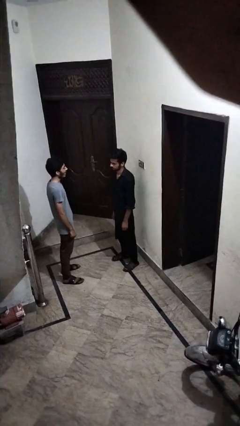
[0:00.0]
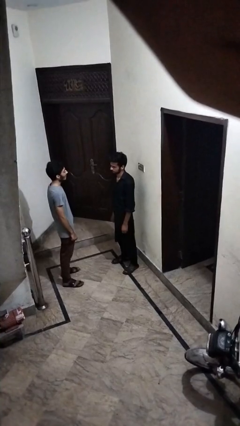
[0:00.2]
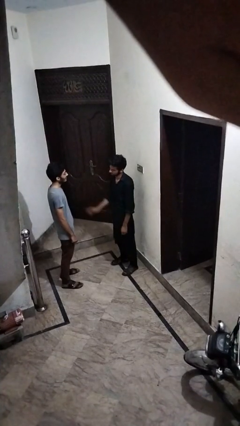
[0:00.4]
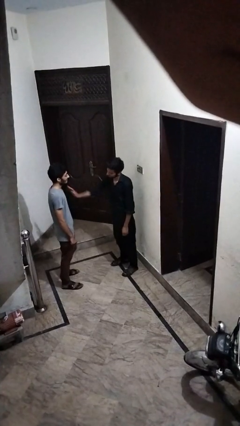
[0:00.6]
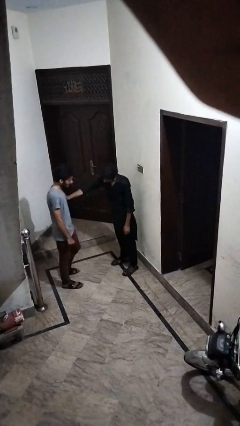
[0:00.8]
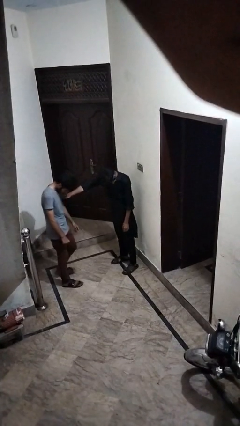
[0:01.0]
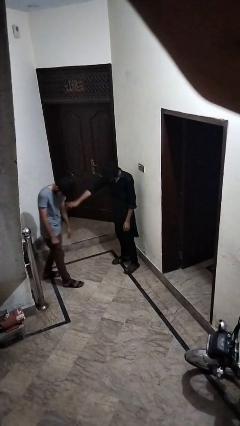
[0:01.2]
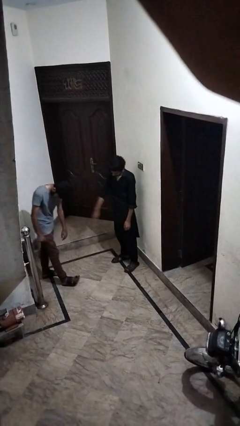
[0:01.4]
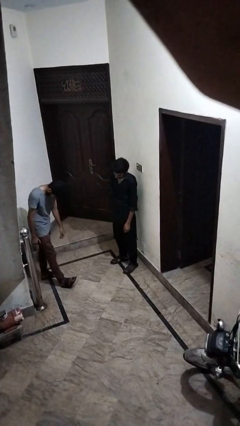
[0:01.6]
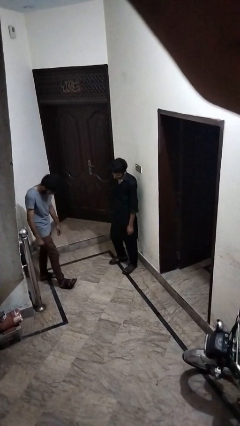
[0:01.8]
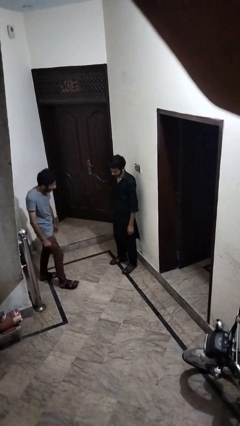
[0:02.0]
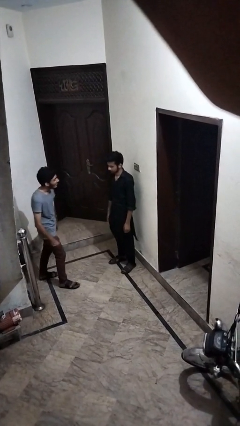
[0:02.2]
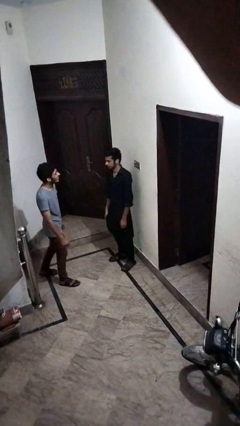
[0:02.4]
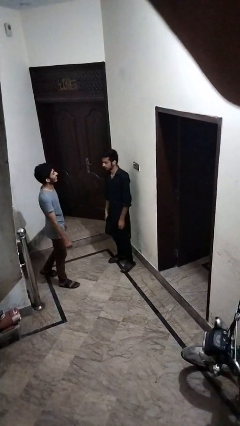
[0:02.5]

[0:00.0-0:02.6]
person shoves person

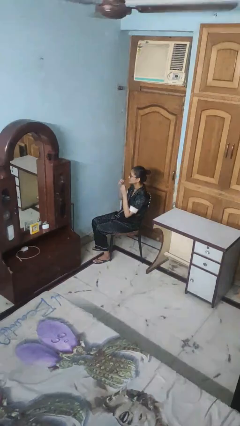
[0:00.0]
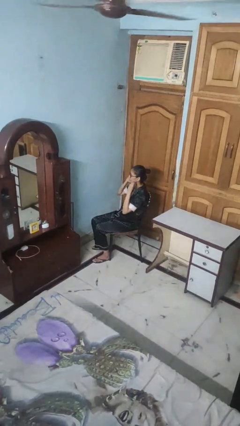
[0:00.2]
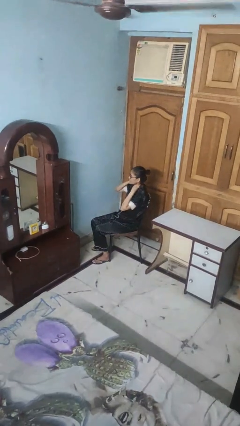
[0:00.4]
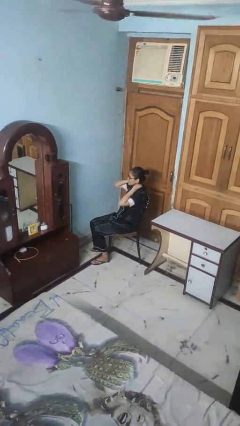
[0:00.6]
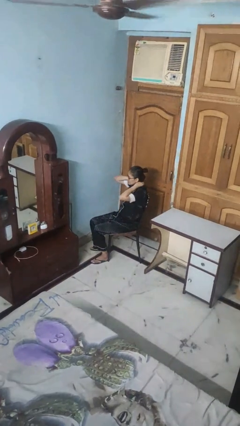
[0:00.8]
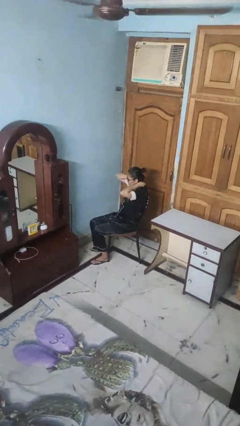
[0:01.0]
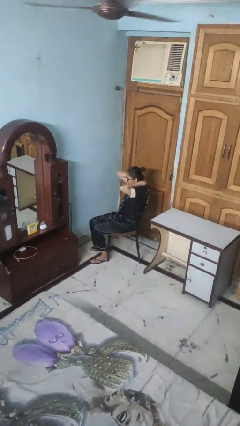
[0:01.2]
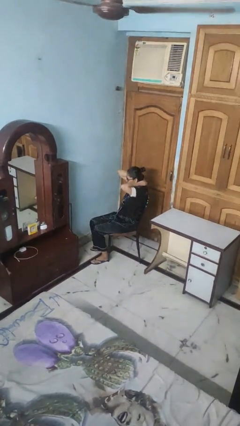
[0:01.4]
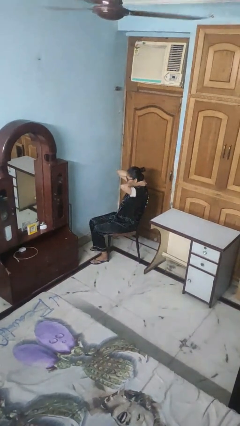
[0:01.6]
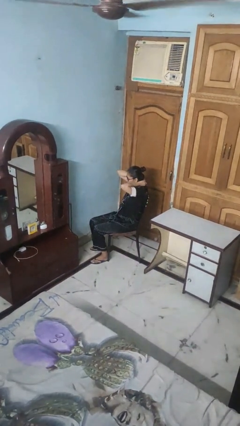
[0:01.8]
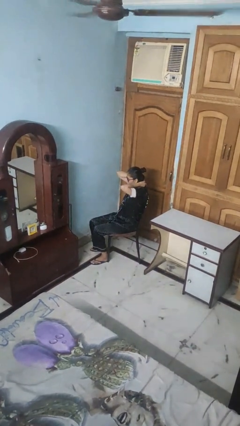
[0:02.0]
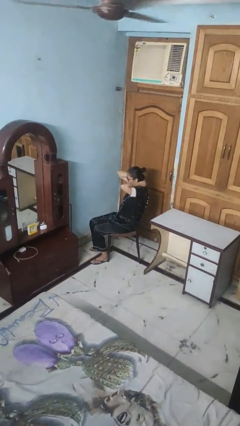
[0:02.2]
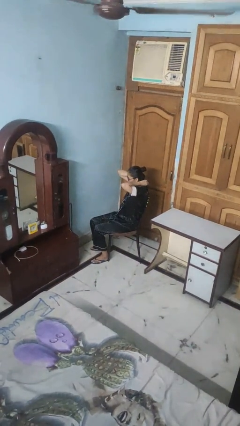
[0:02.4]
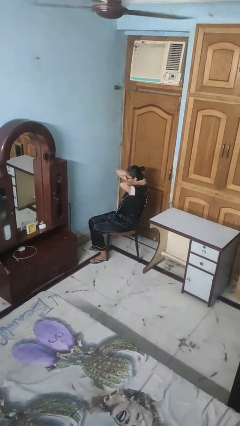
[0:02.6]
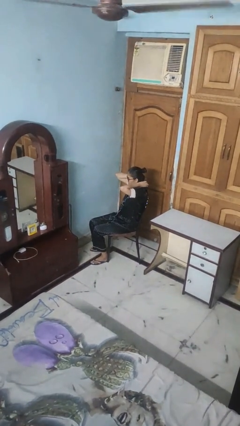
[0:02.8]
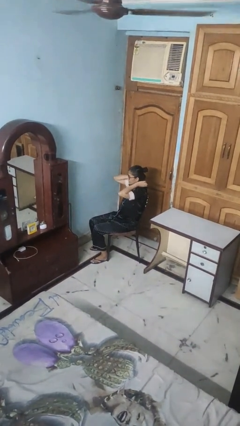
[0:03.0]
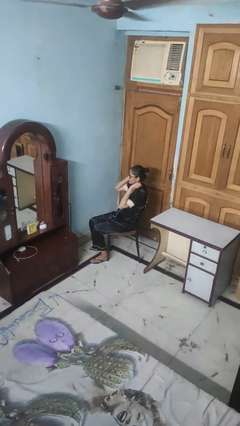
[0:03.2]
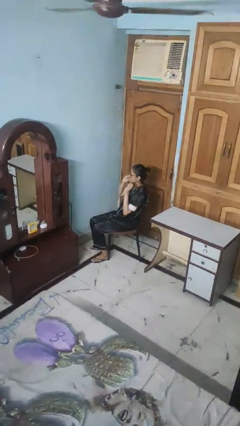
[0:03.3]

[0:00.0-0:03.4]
person puts on necklace

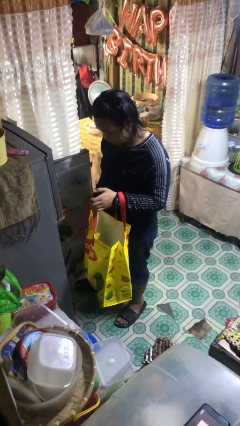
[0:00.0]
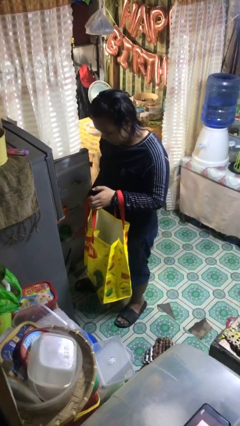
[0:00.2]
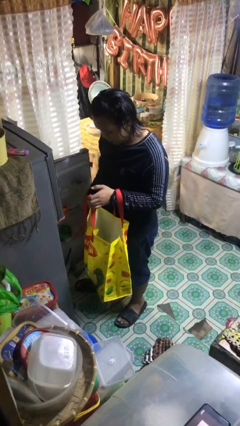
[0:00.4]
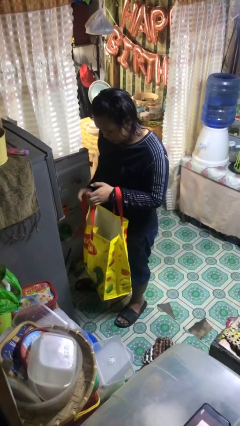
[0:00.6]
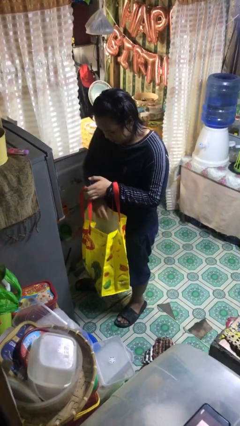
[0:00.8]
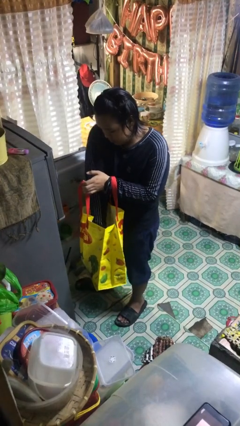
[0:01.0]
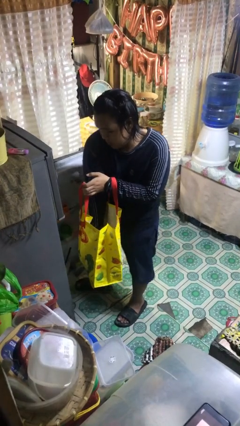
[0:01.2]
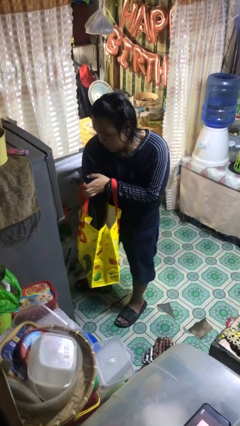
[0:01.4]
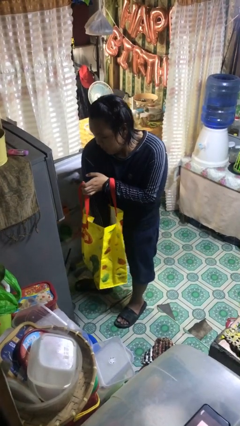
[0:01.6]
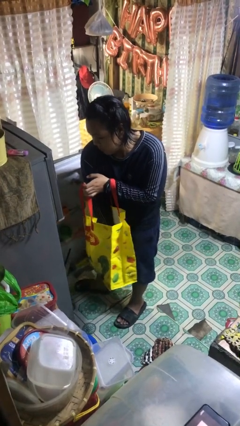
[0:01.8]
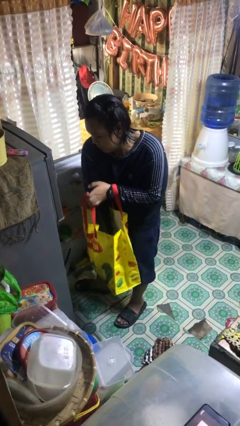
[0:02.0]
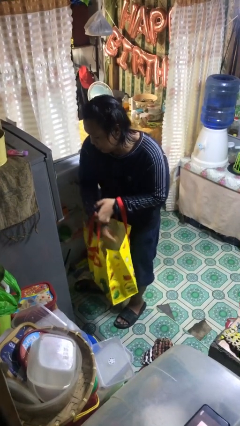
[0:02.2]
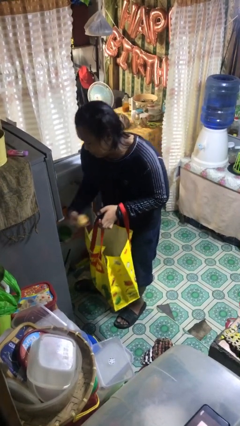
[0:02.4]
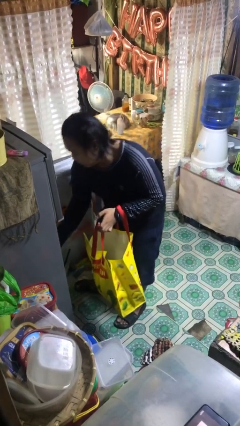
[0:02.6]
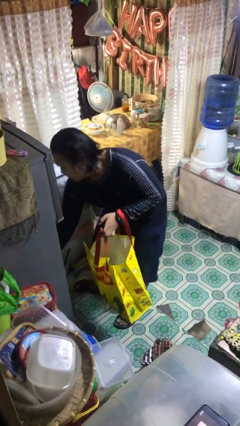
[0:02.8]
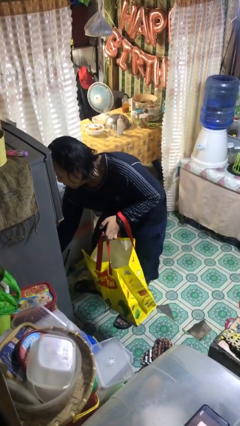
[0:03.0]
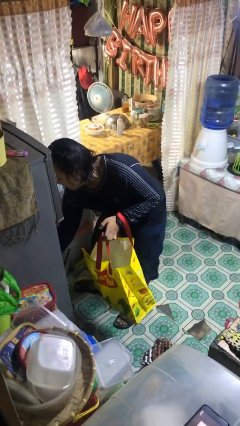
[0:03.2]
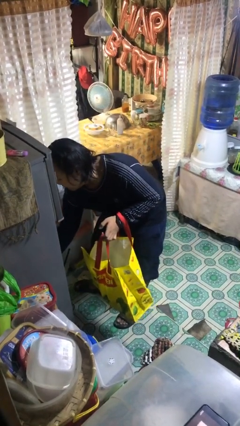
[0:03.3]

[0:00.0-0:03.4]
person loads groceries into refrigerator

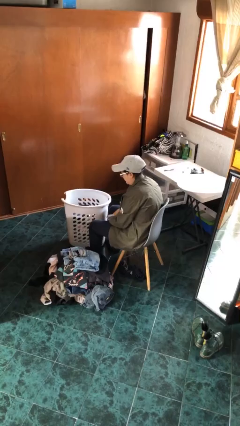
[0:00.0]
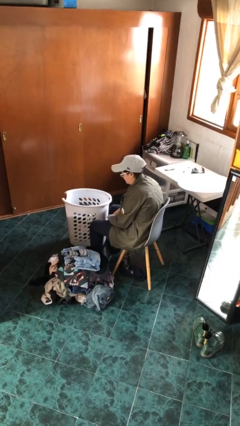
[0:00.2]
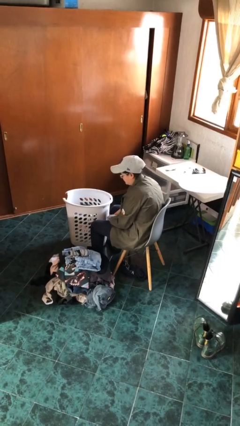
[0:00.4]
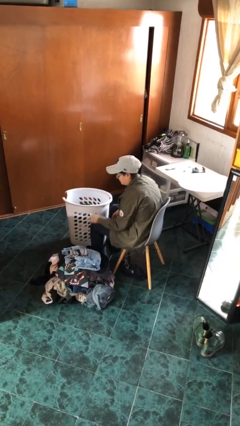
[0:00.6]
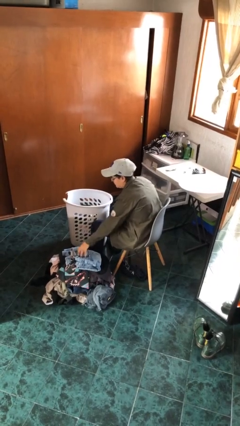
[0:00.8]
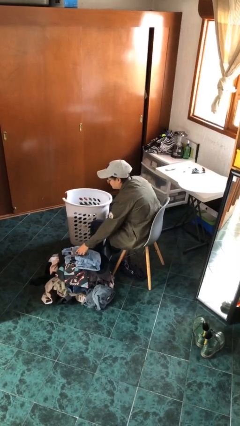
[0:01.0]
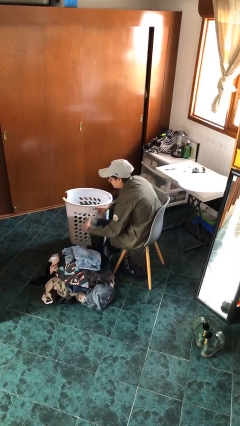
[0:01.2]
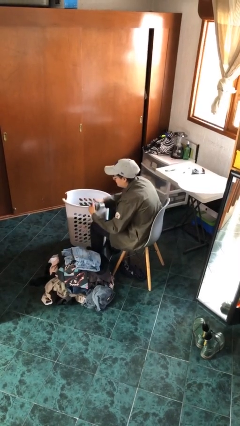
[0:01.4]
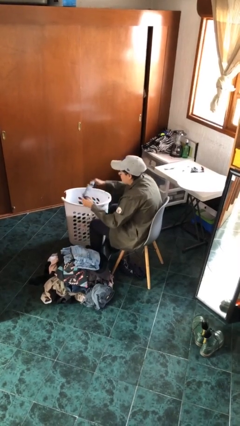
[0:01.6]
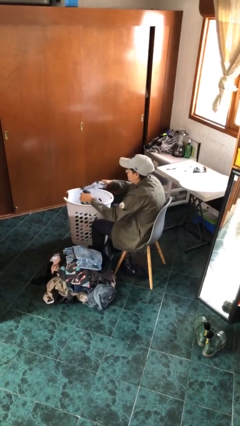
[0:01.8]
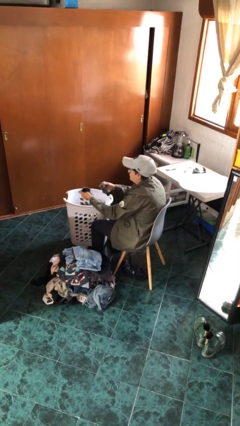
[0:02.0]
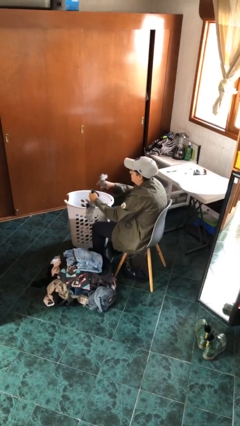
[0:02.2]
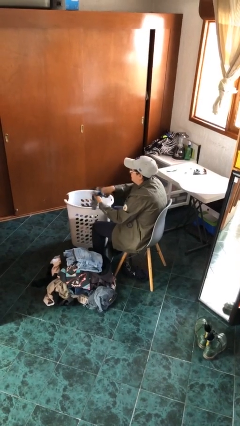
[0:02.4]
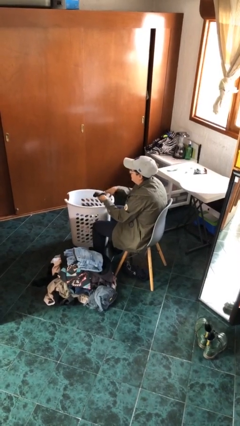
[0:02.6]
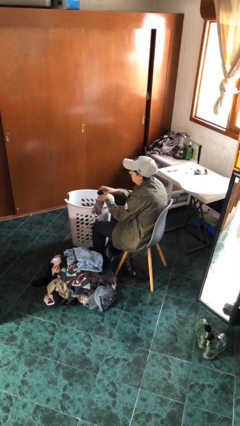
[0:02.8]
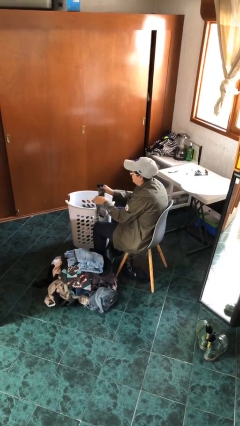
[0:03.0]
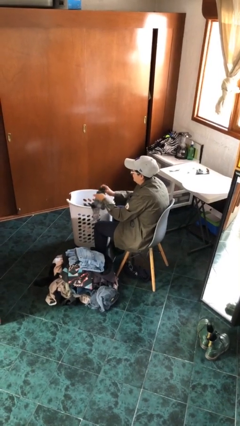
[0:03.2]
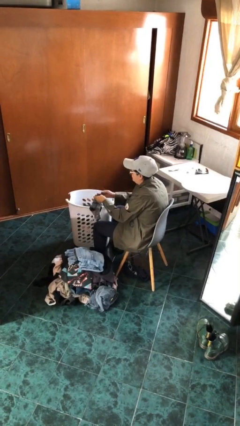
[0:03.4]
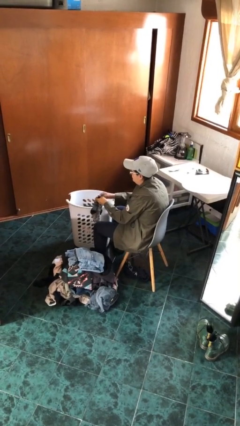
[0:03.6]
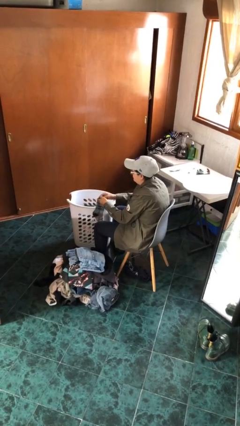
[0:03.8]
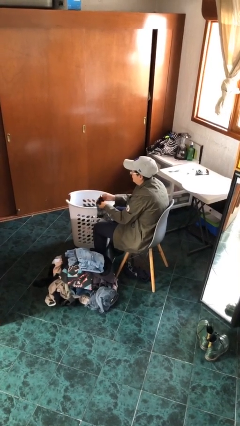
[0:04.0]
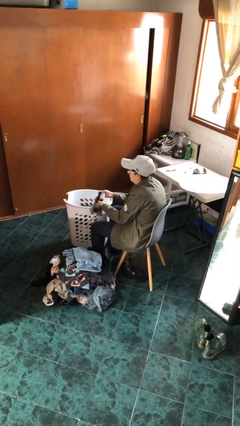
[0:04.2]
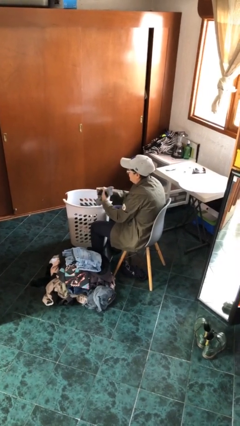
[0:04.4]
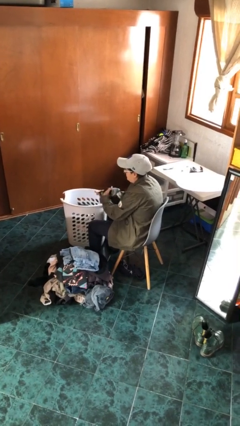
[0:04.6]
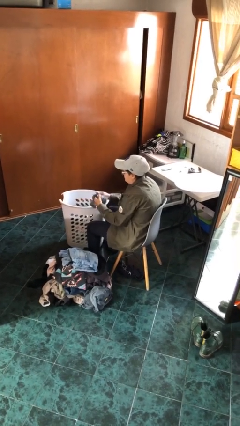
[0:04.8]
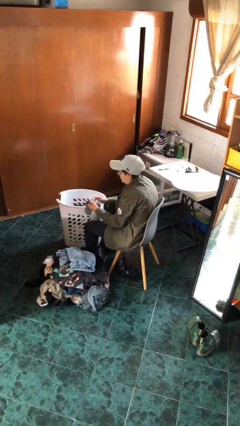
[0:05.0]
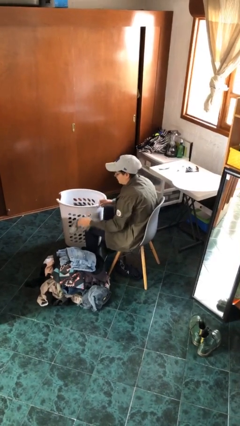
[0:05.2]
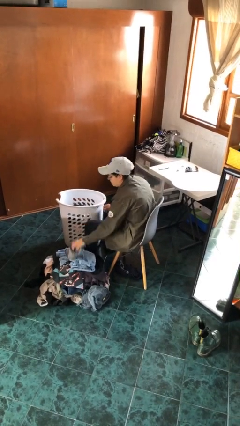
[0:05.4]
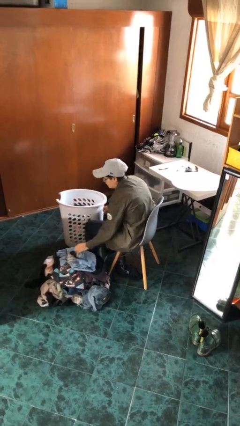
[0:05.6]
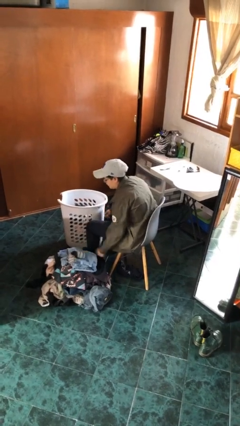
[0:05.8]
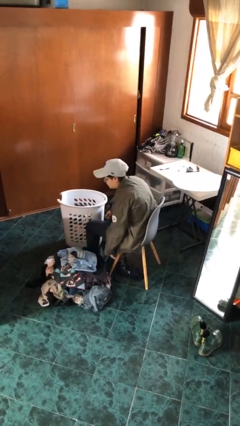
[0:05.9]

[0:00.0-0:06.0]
person folds socks

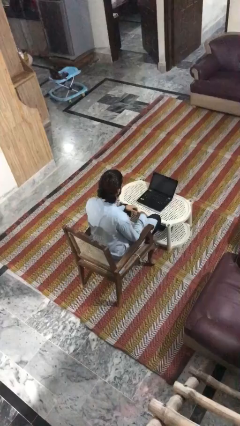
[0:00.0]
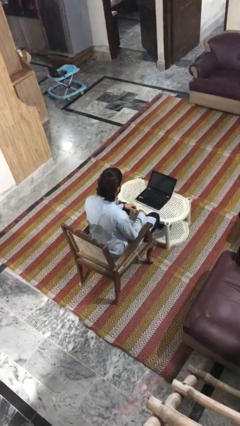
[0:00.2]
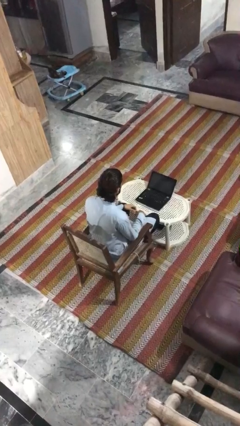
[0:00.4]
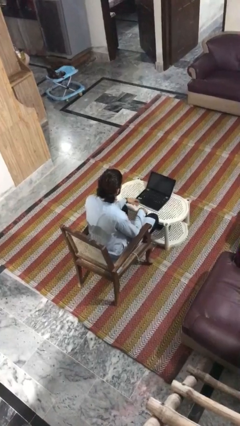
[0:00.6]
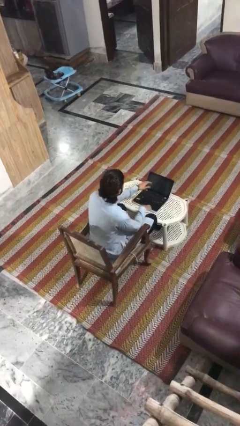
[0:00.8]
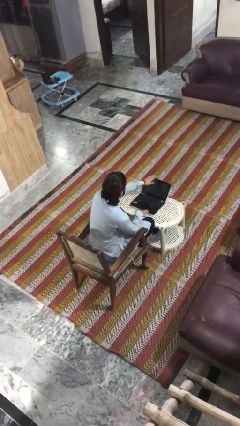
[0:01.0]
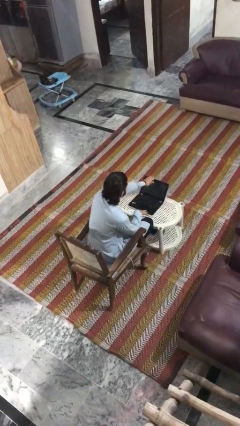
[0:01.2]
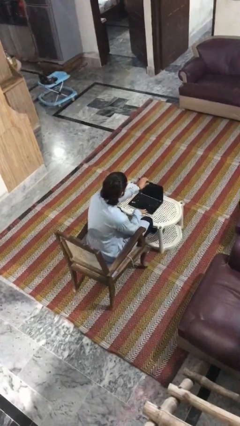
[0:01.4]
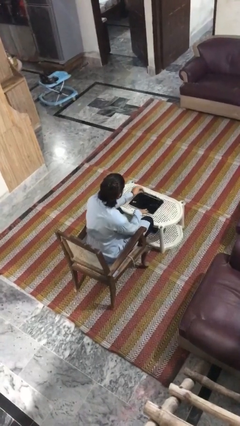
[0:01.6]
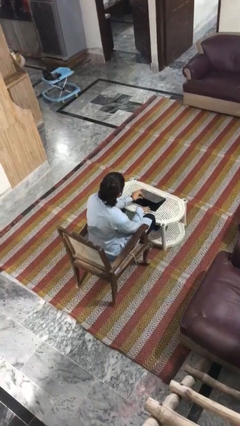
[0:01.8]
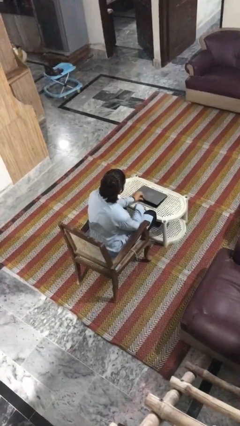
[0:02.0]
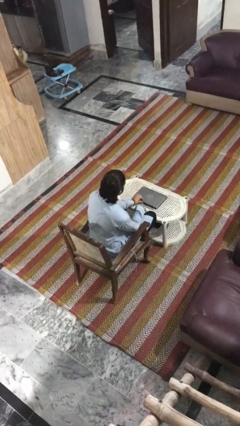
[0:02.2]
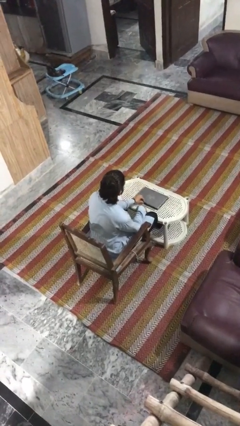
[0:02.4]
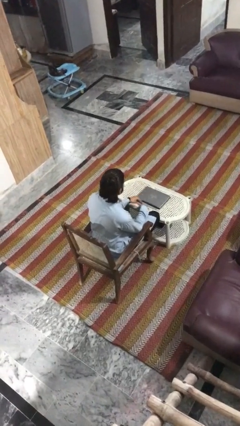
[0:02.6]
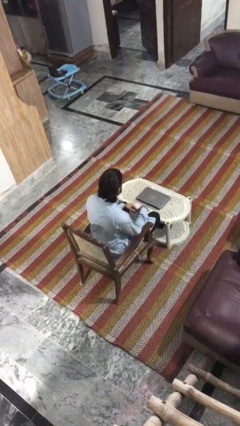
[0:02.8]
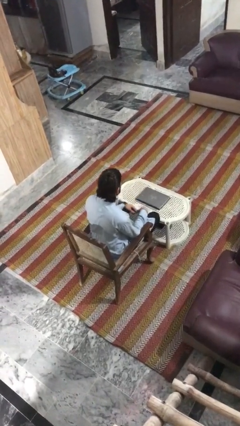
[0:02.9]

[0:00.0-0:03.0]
person closes laptop
